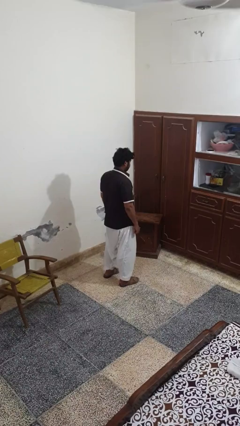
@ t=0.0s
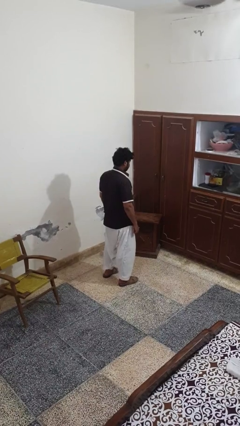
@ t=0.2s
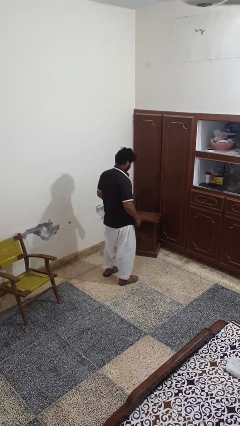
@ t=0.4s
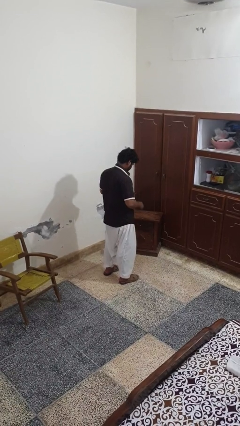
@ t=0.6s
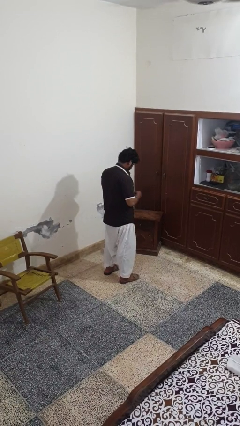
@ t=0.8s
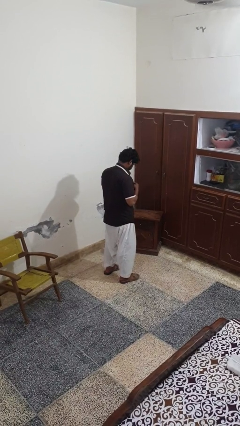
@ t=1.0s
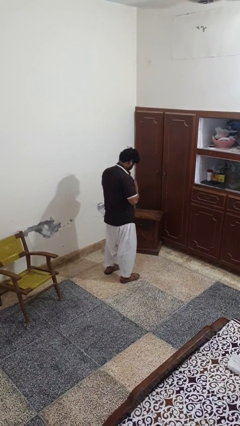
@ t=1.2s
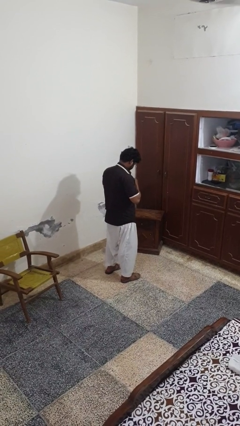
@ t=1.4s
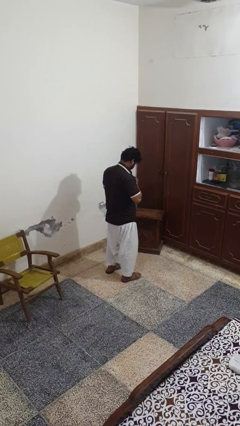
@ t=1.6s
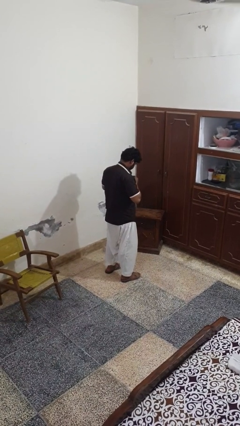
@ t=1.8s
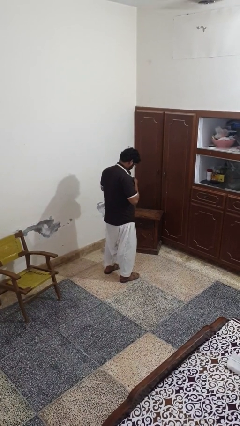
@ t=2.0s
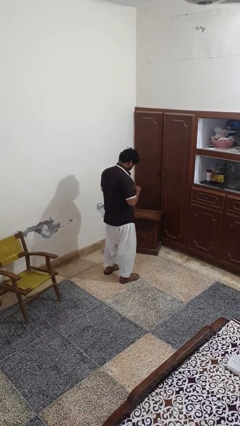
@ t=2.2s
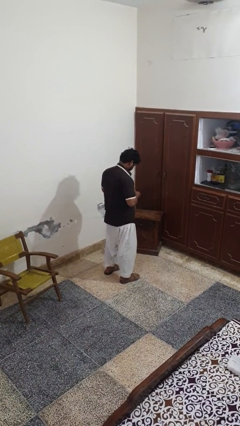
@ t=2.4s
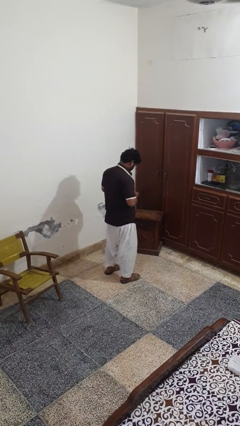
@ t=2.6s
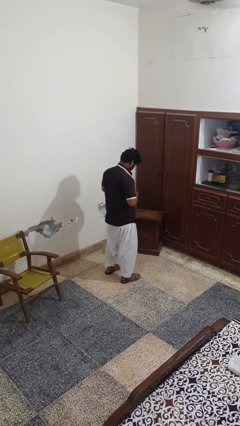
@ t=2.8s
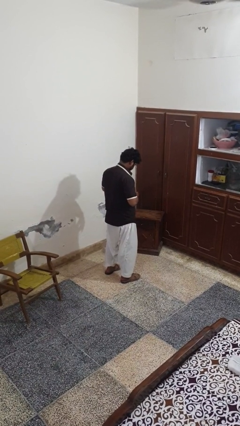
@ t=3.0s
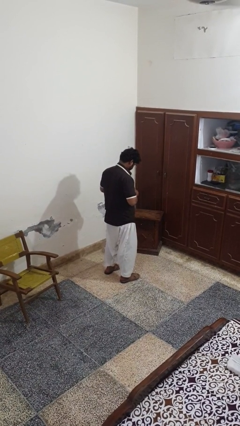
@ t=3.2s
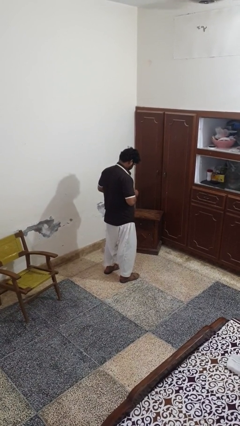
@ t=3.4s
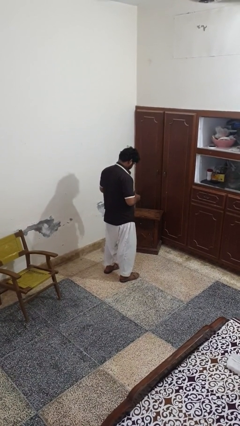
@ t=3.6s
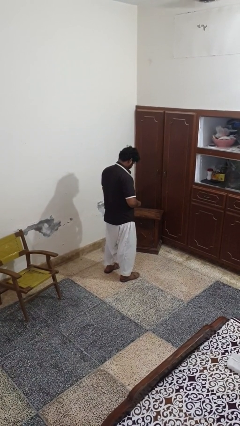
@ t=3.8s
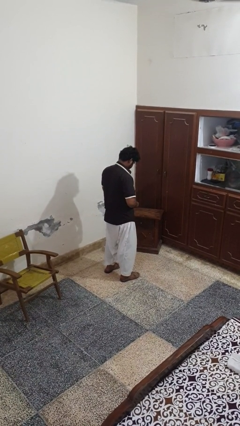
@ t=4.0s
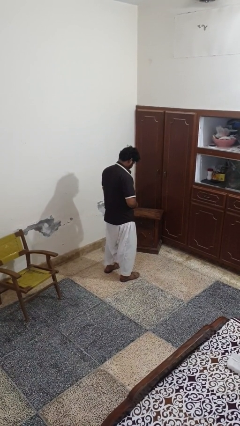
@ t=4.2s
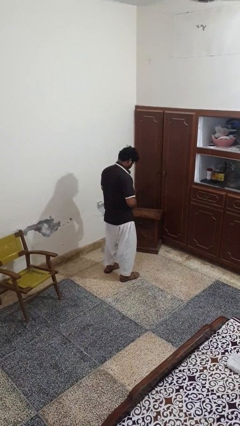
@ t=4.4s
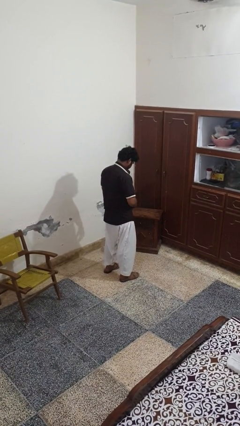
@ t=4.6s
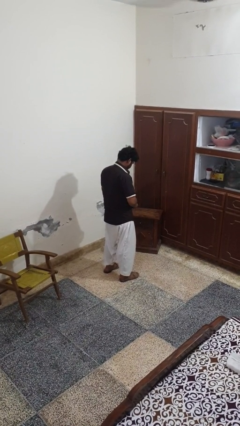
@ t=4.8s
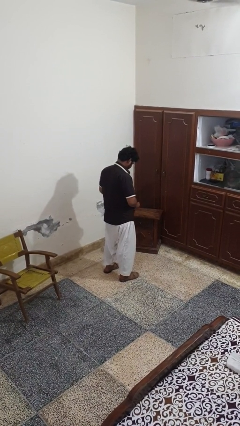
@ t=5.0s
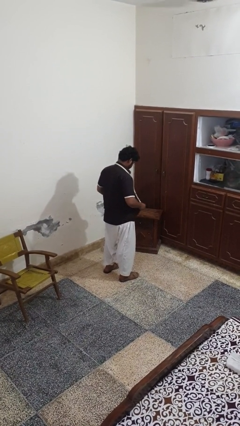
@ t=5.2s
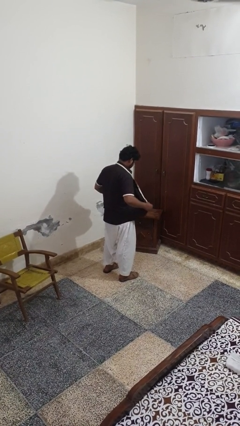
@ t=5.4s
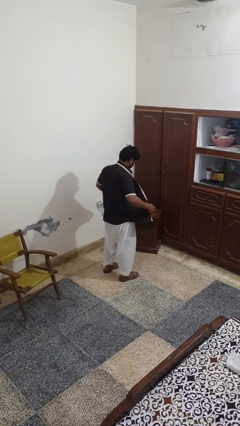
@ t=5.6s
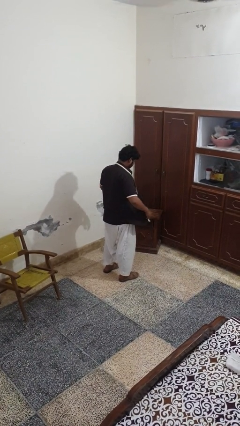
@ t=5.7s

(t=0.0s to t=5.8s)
person unbuttons shirt

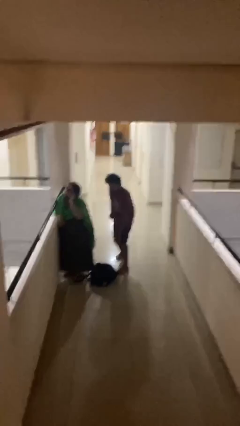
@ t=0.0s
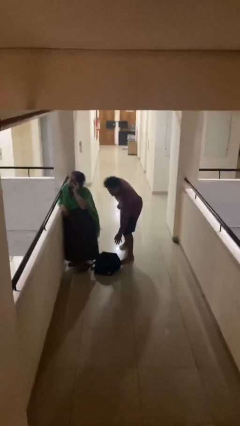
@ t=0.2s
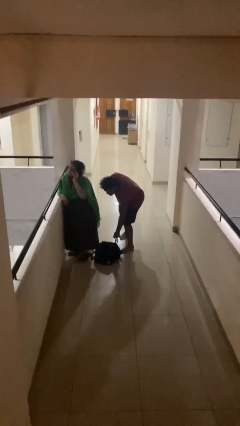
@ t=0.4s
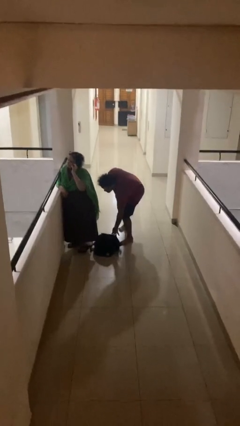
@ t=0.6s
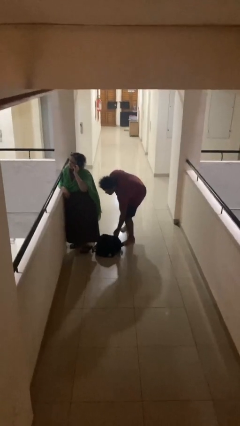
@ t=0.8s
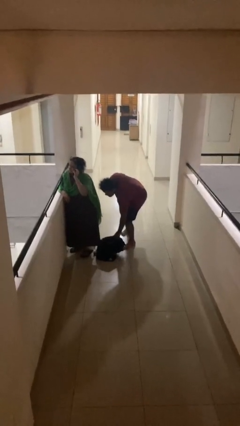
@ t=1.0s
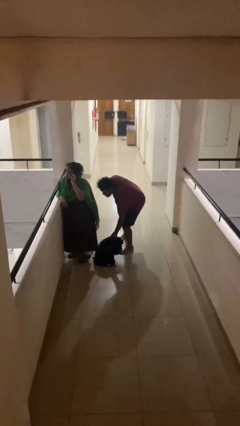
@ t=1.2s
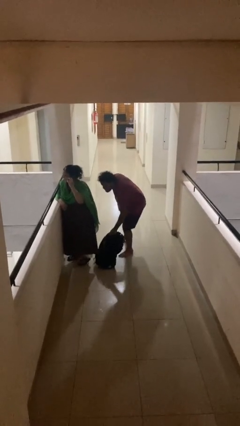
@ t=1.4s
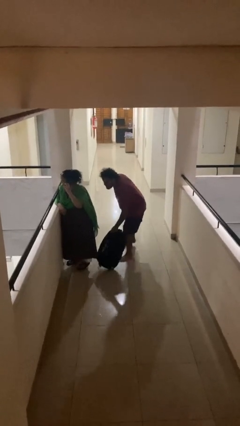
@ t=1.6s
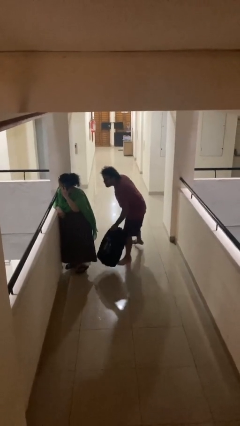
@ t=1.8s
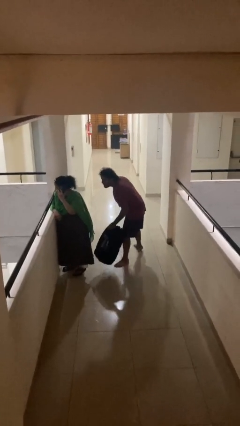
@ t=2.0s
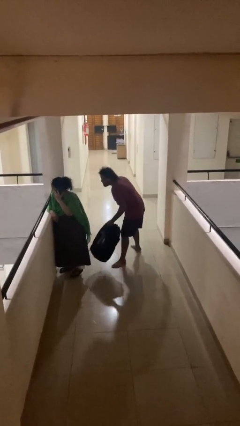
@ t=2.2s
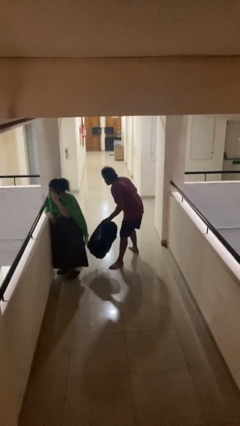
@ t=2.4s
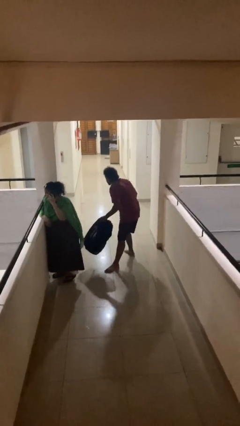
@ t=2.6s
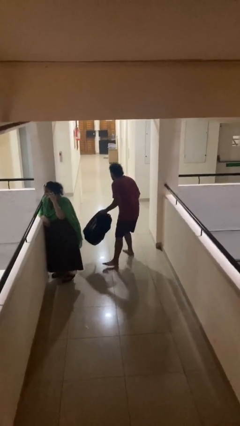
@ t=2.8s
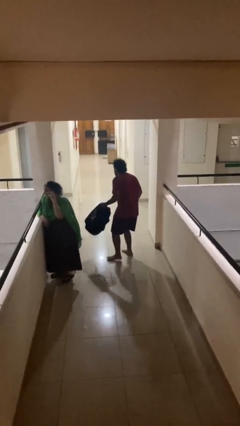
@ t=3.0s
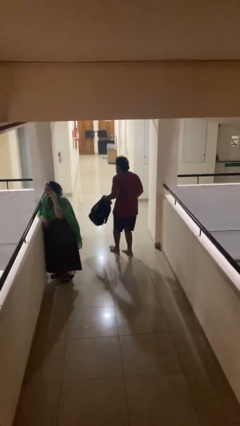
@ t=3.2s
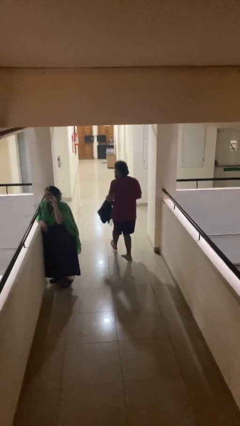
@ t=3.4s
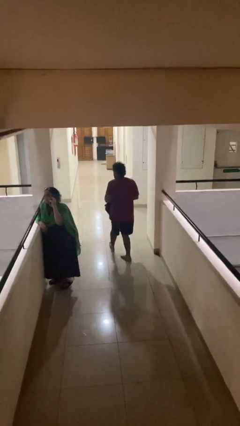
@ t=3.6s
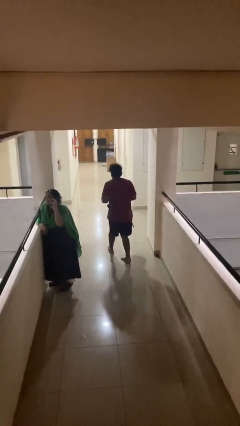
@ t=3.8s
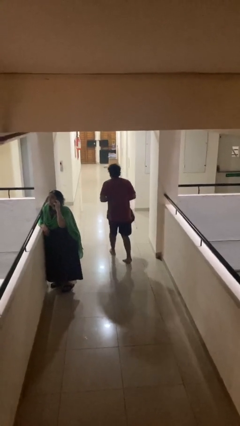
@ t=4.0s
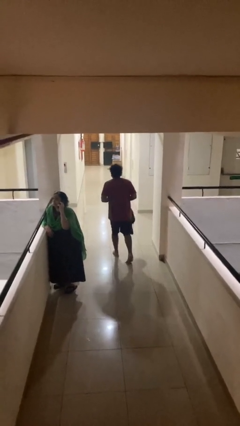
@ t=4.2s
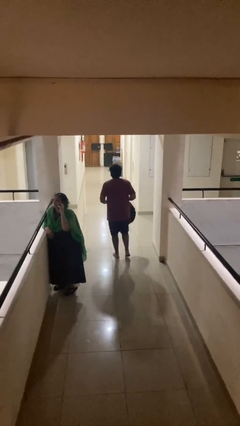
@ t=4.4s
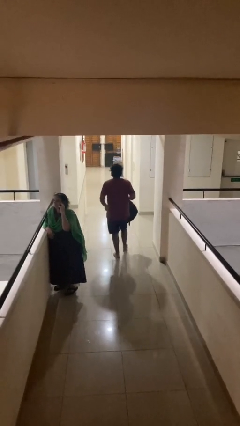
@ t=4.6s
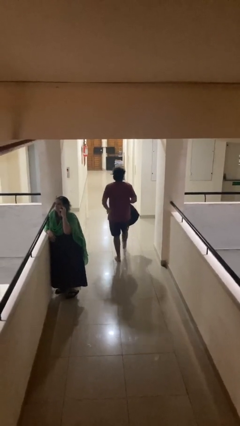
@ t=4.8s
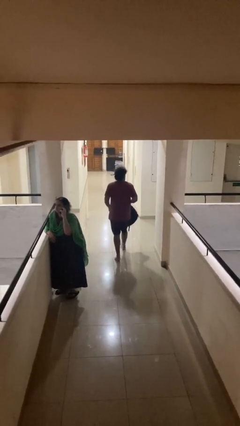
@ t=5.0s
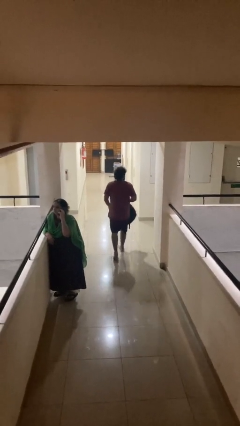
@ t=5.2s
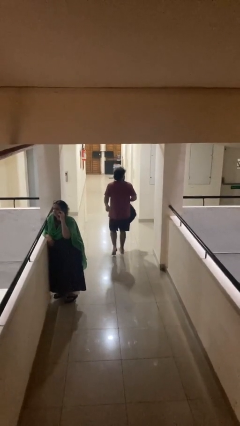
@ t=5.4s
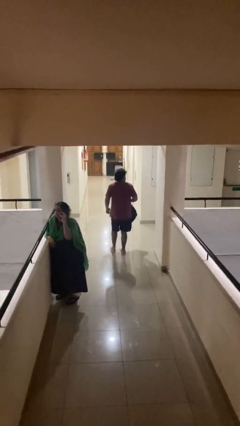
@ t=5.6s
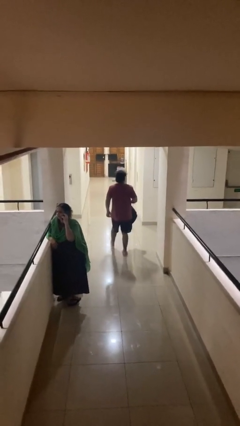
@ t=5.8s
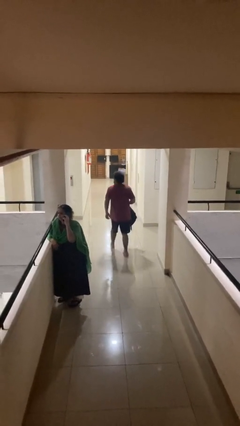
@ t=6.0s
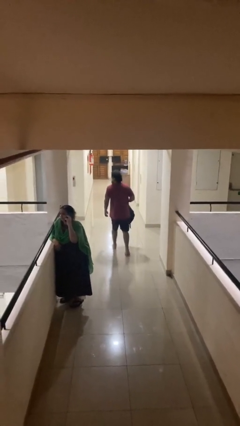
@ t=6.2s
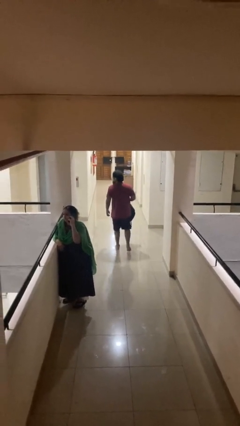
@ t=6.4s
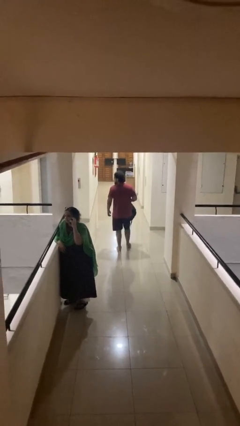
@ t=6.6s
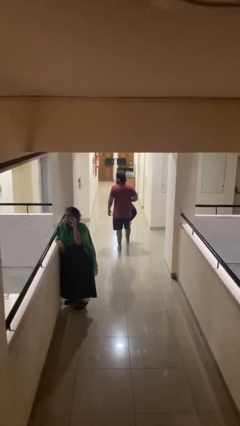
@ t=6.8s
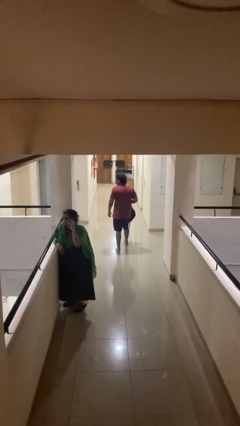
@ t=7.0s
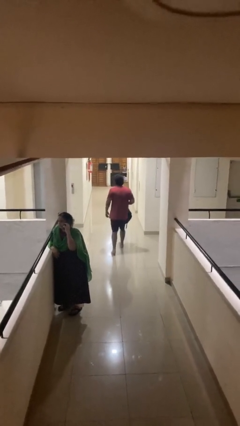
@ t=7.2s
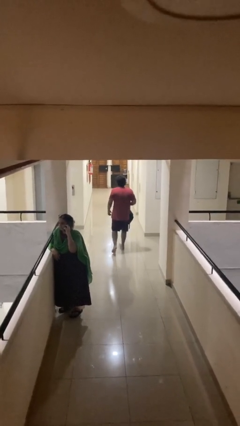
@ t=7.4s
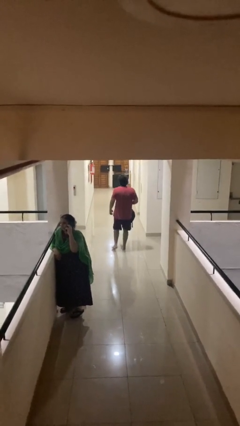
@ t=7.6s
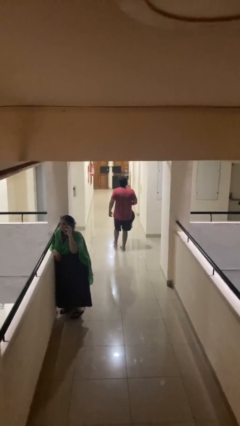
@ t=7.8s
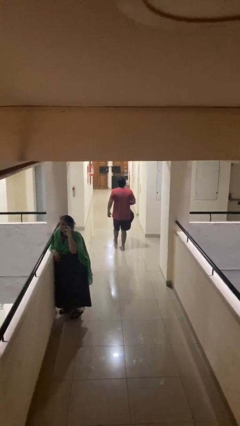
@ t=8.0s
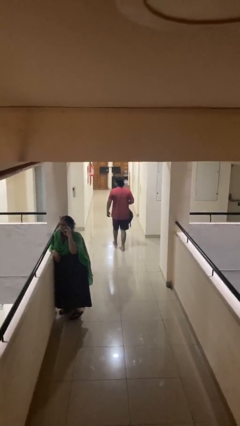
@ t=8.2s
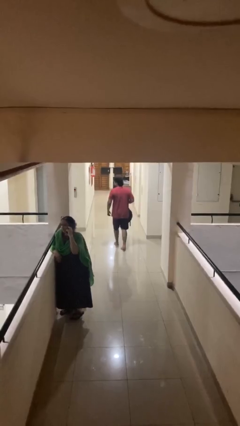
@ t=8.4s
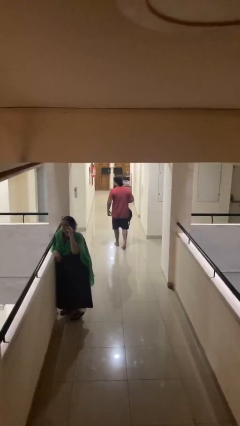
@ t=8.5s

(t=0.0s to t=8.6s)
person steals object from person

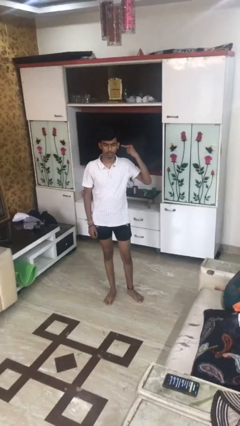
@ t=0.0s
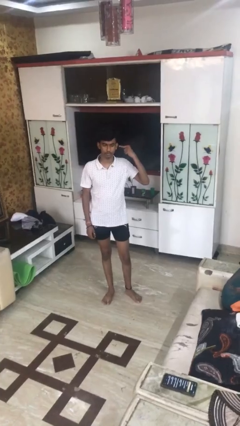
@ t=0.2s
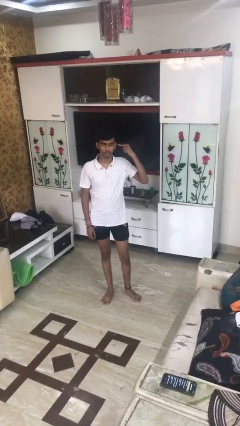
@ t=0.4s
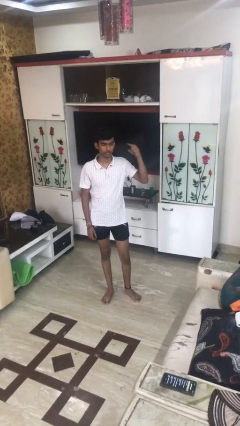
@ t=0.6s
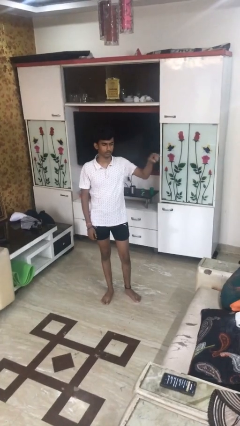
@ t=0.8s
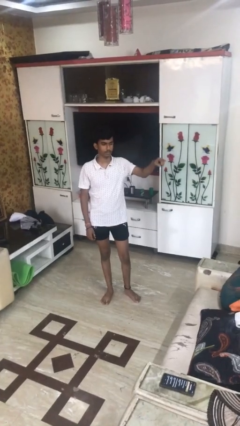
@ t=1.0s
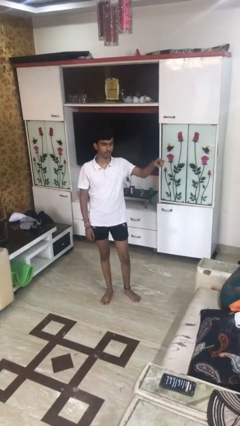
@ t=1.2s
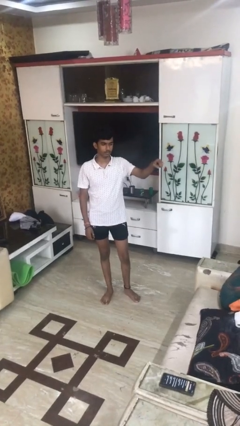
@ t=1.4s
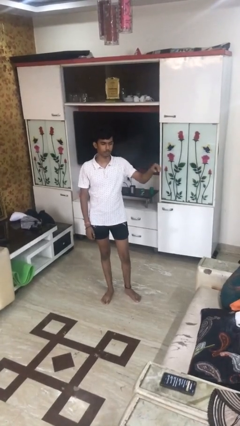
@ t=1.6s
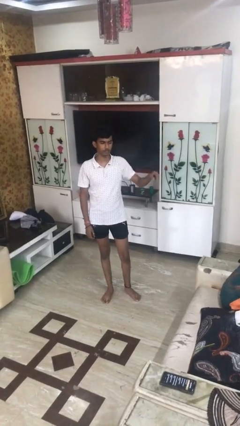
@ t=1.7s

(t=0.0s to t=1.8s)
person gestures listen closely

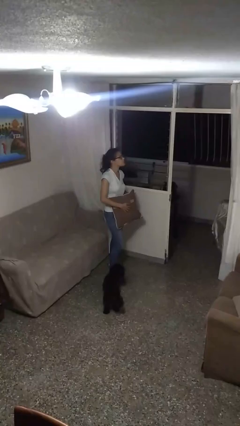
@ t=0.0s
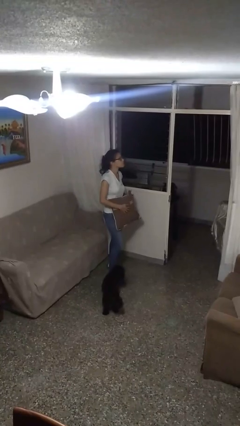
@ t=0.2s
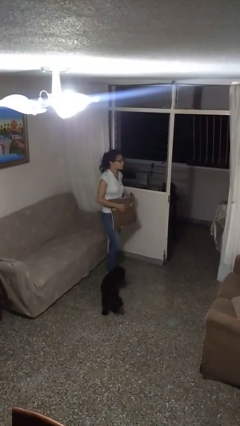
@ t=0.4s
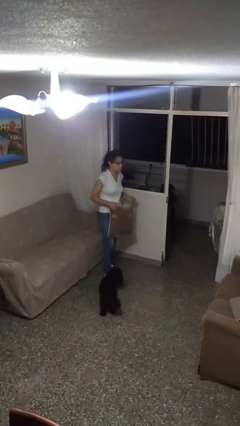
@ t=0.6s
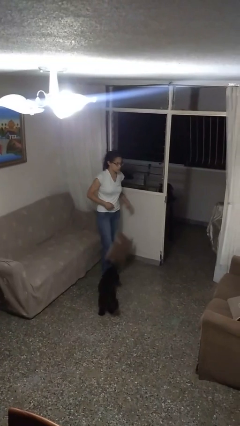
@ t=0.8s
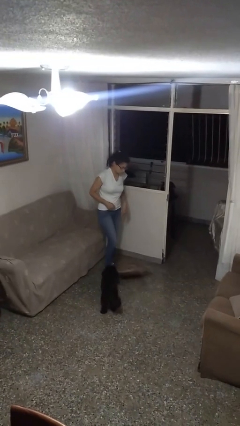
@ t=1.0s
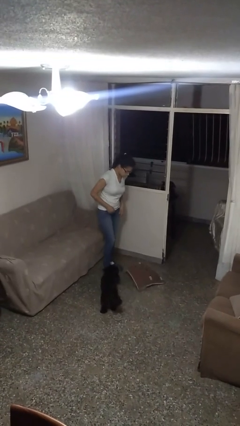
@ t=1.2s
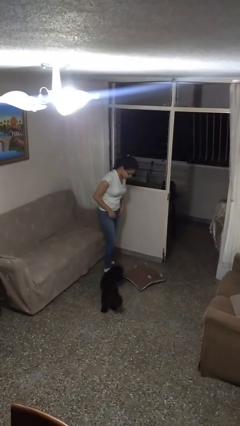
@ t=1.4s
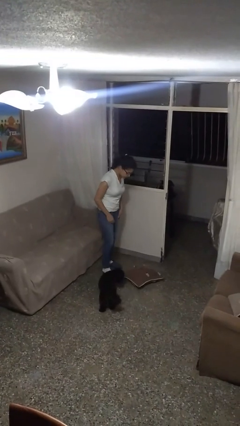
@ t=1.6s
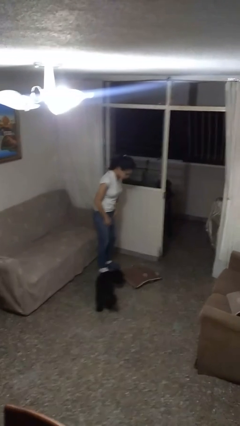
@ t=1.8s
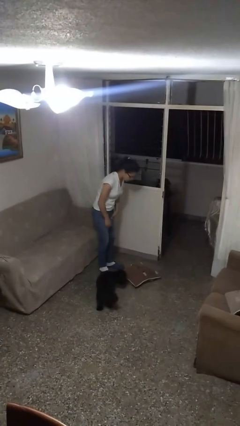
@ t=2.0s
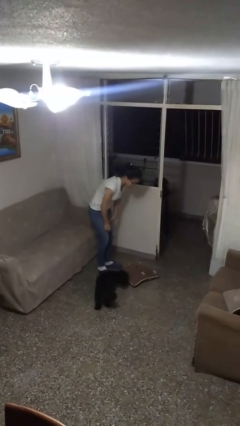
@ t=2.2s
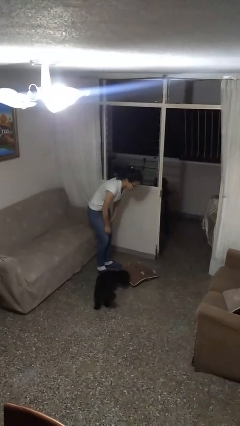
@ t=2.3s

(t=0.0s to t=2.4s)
person drops object
